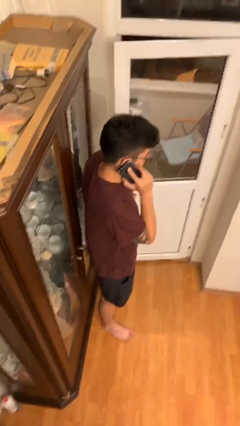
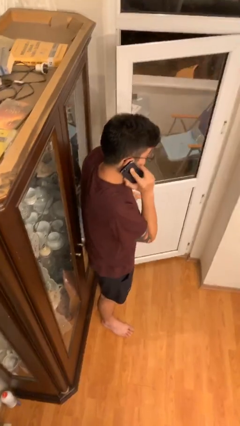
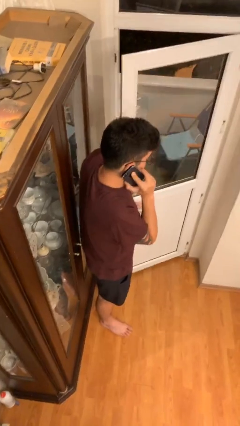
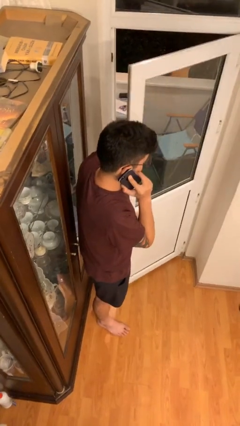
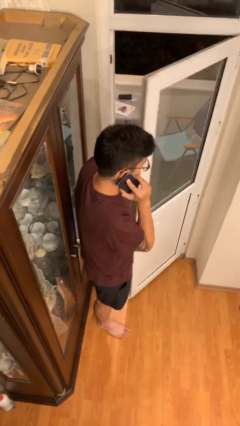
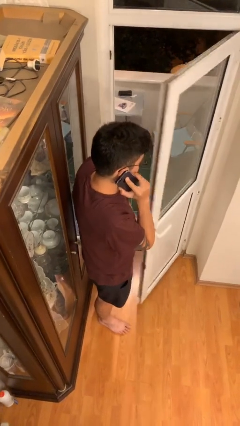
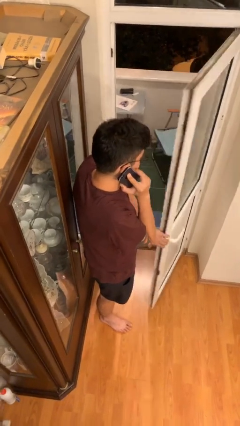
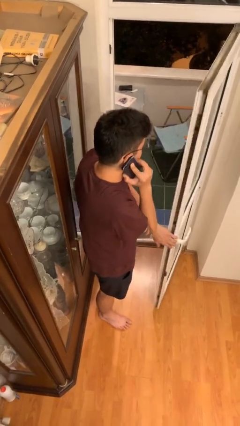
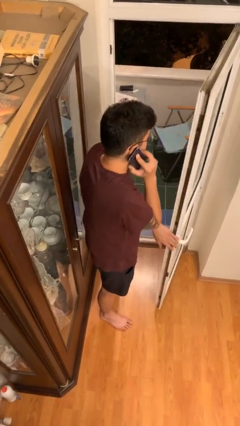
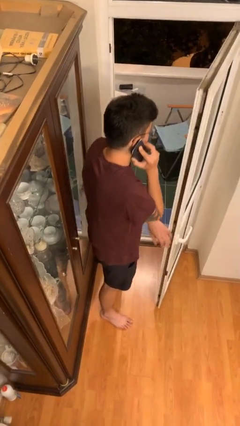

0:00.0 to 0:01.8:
person opens facility door

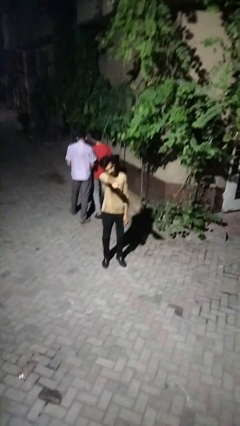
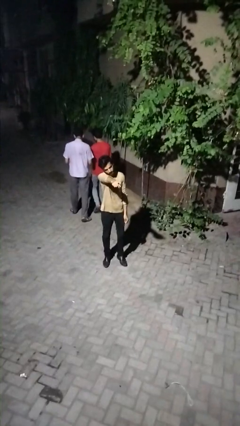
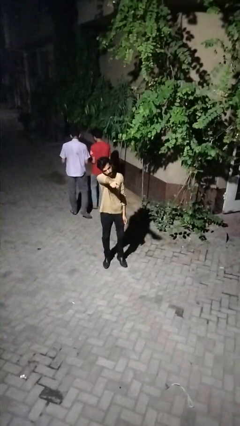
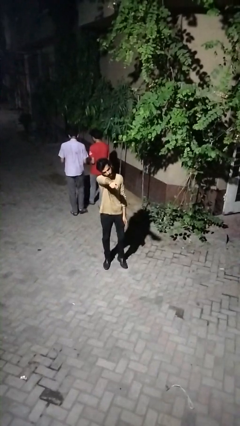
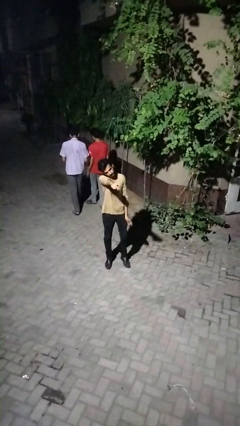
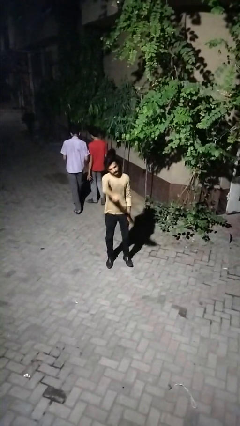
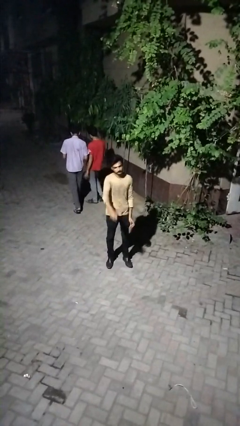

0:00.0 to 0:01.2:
person points at person

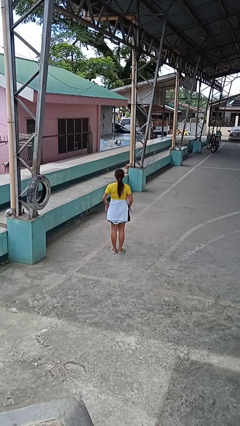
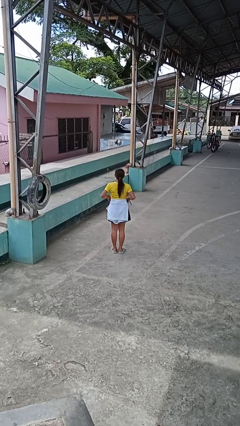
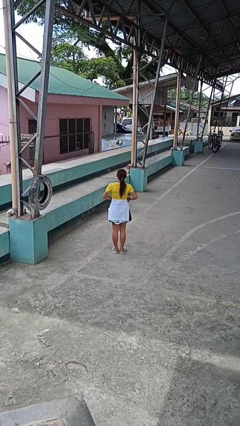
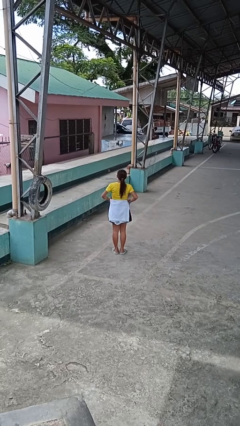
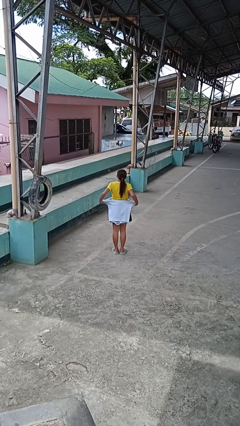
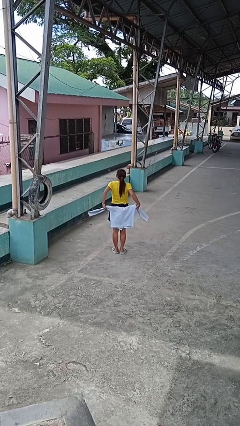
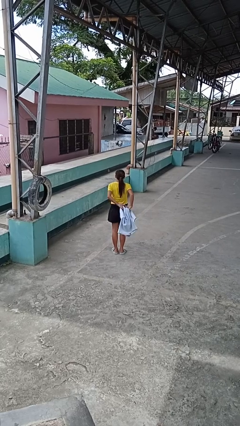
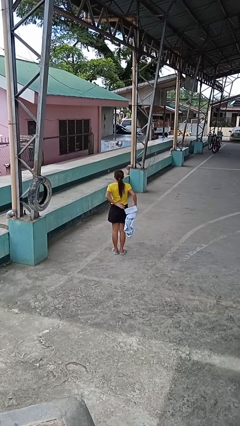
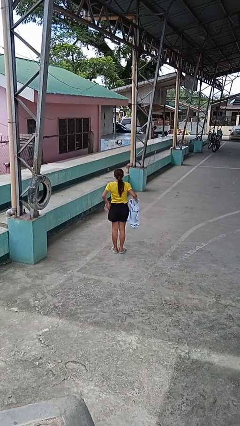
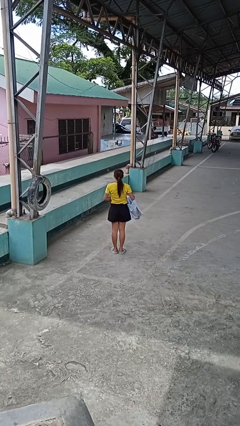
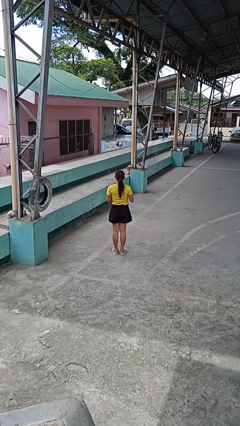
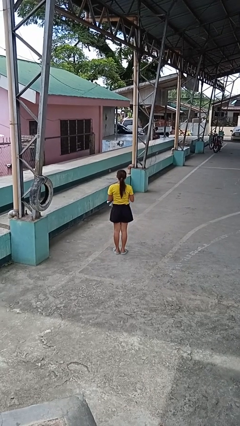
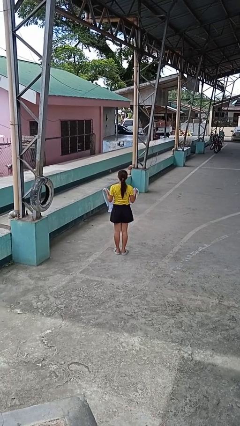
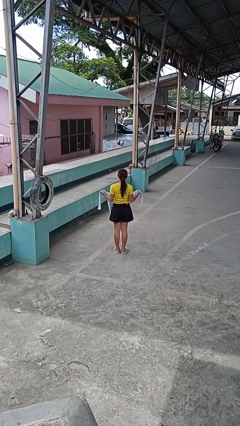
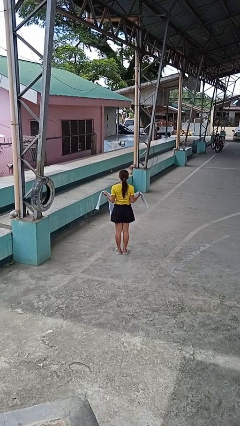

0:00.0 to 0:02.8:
person unties jacket around waist

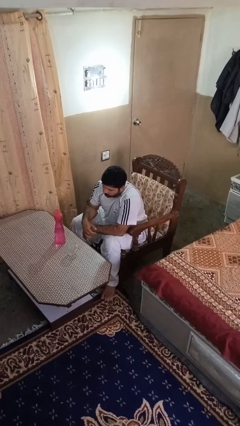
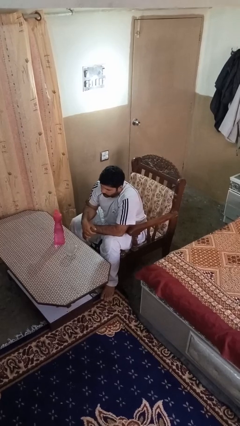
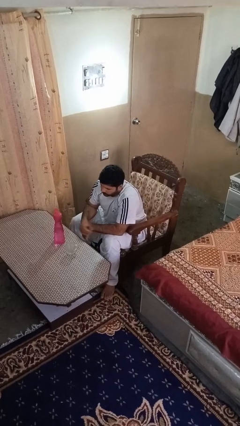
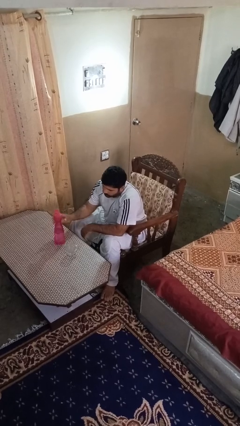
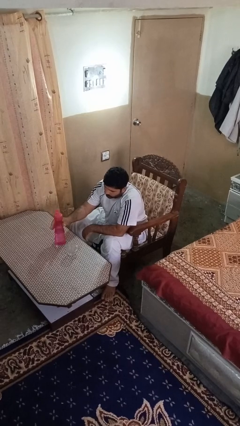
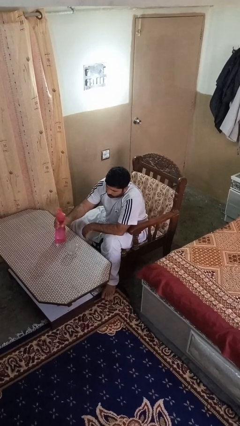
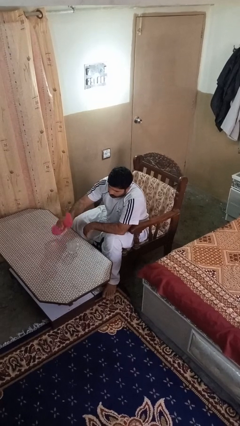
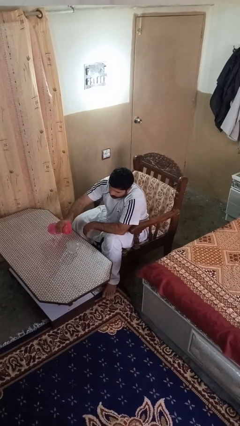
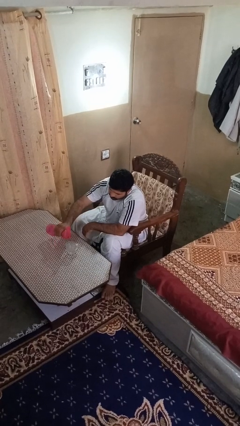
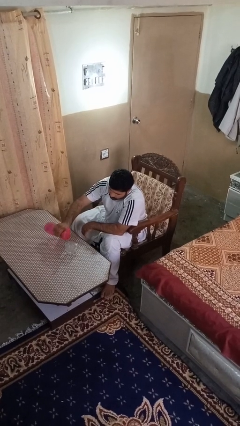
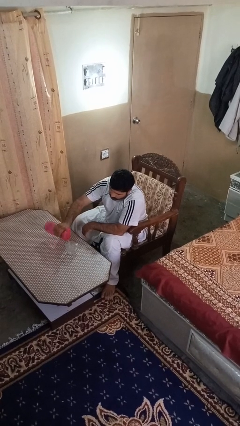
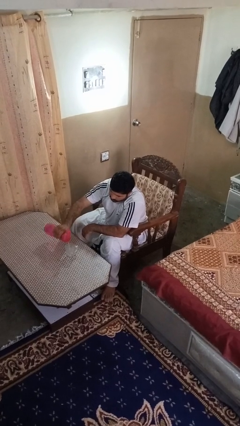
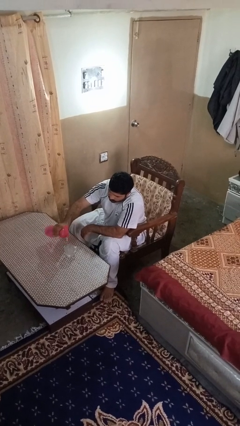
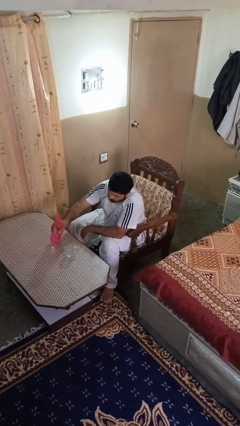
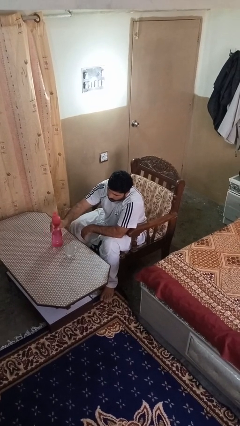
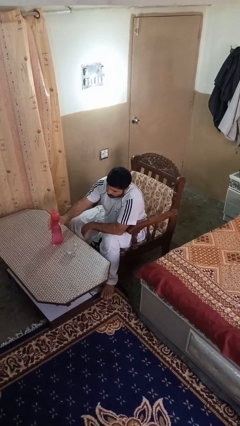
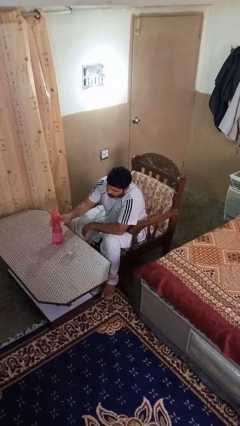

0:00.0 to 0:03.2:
person pours liquid into cup

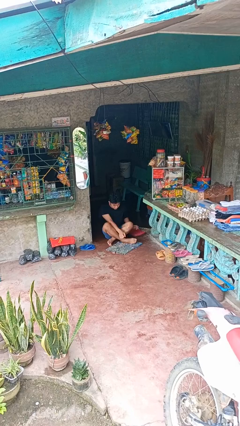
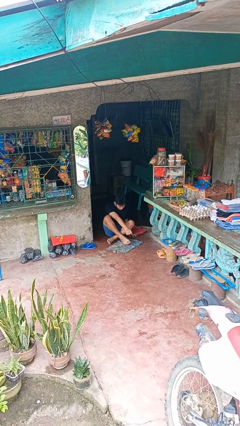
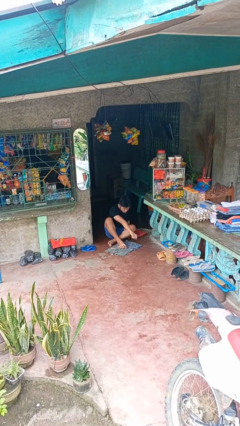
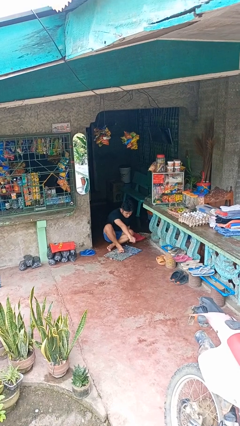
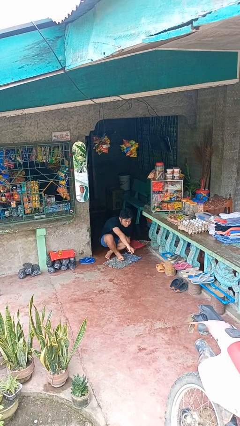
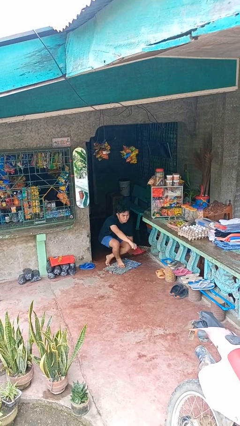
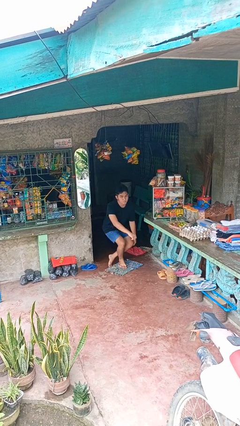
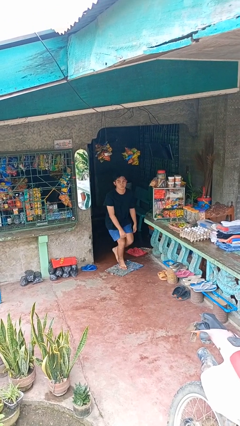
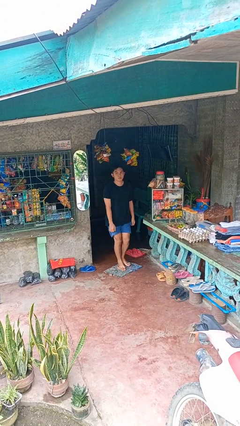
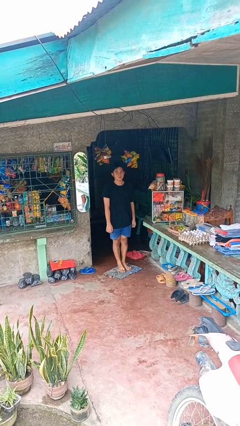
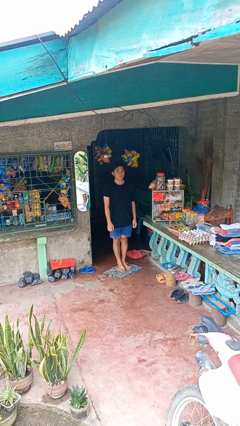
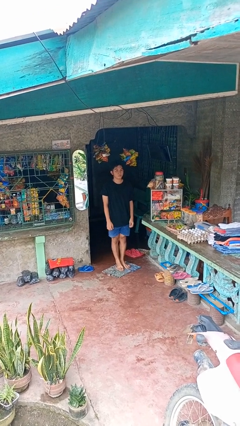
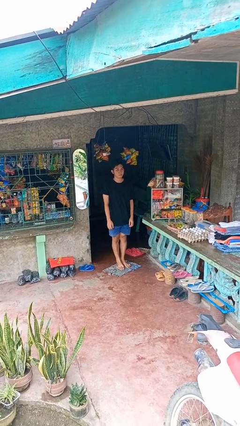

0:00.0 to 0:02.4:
person stands up from floor

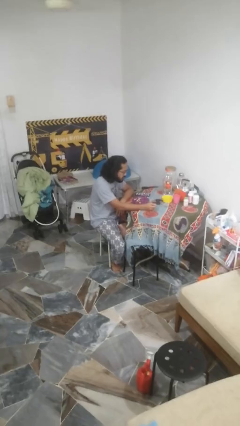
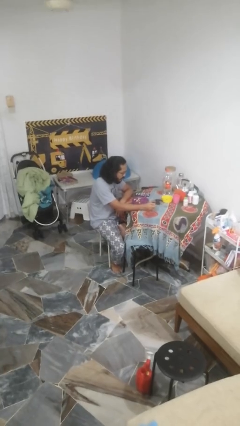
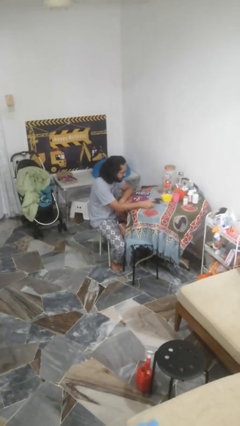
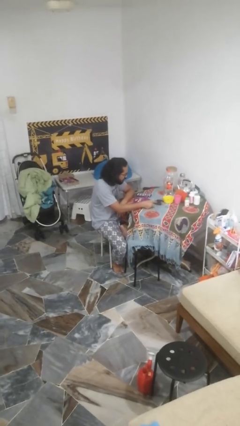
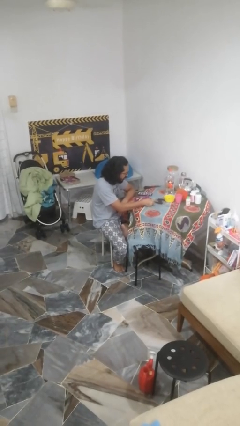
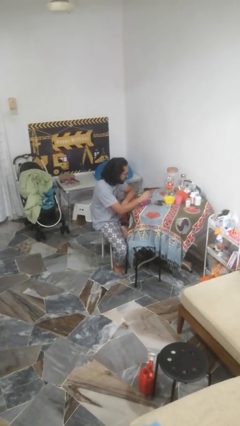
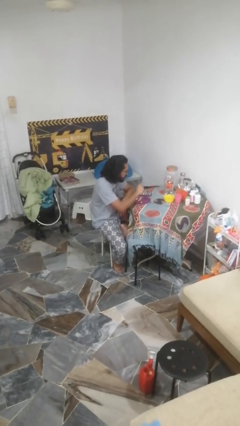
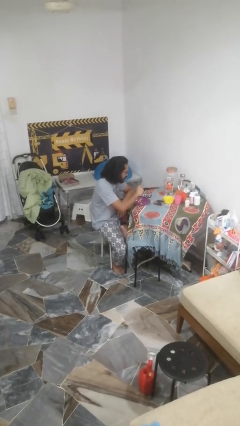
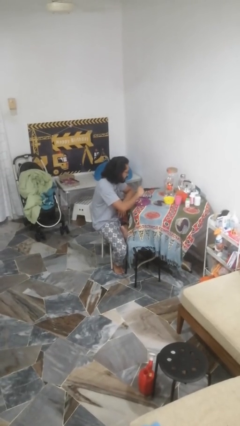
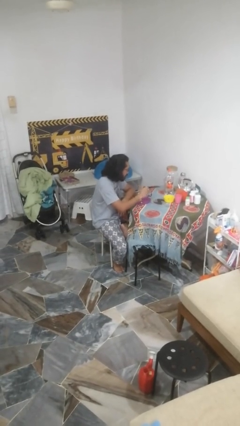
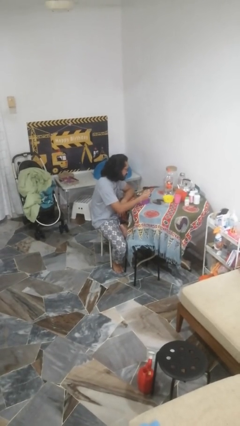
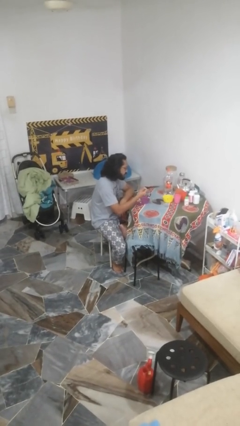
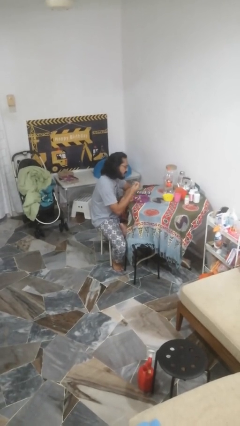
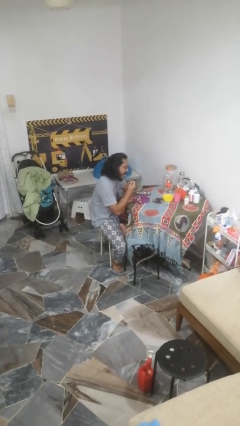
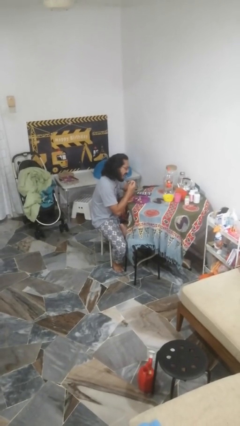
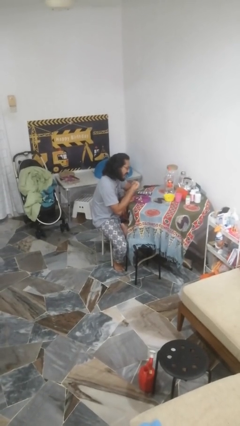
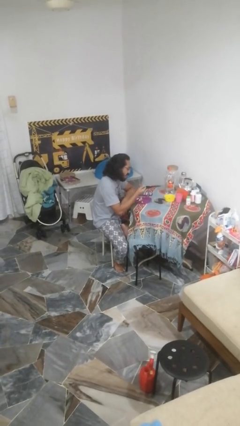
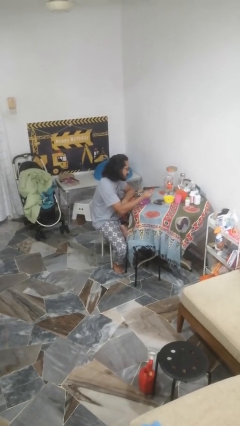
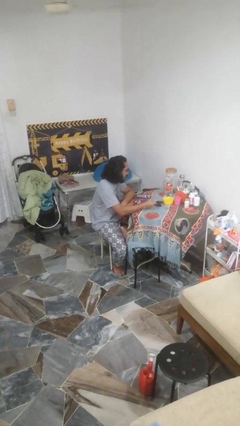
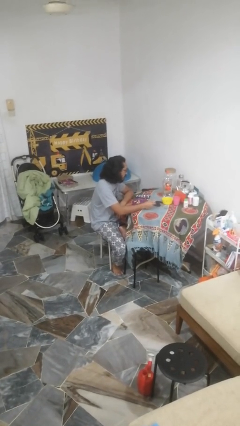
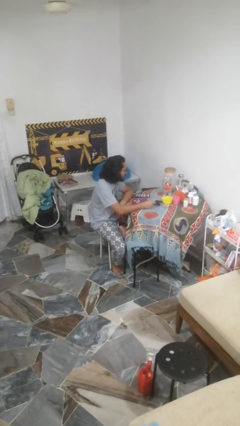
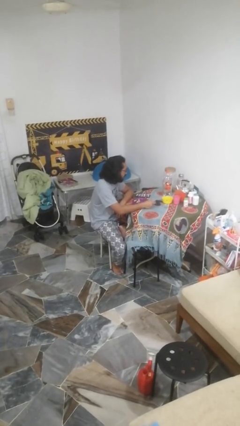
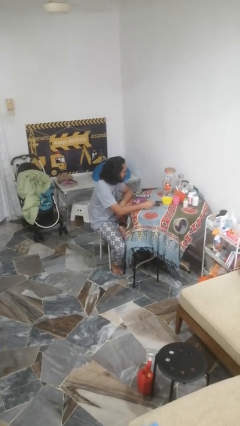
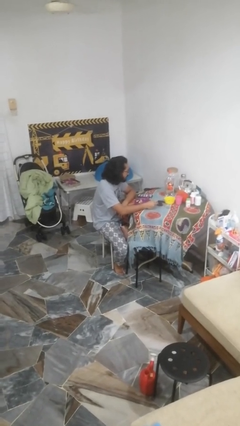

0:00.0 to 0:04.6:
person eats with utensil

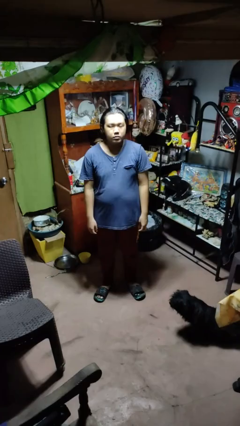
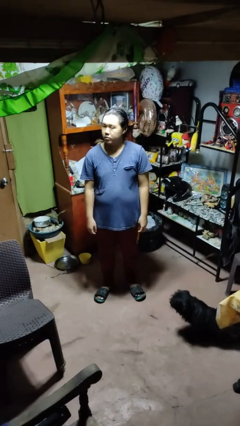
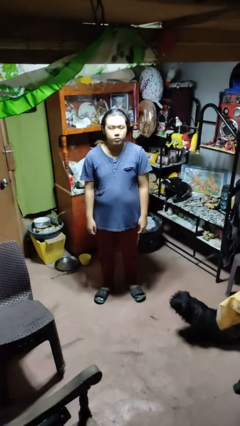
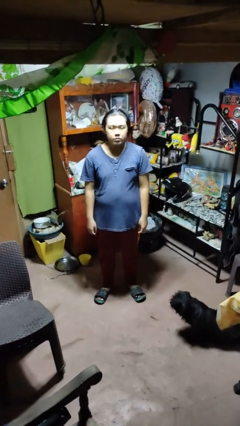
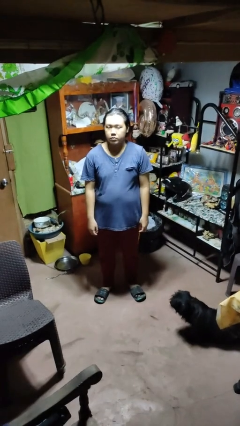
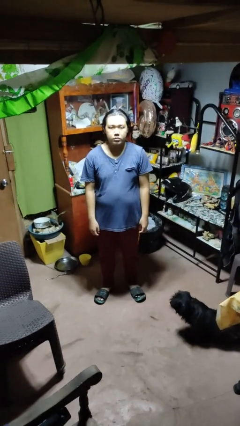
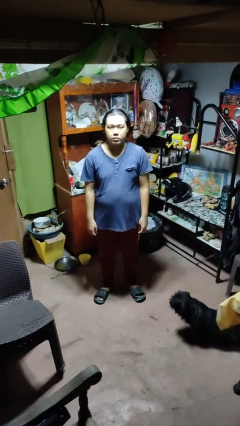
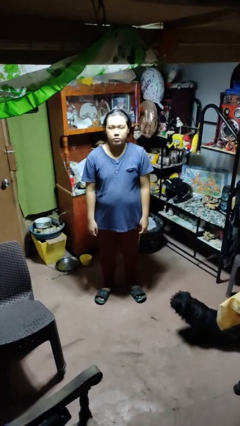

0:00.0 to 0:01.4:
person shakes head
